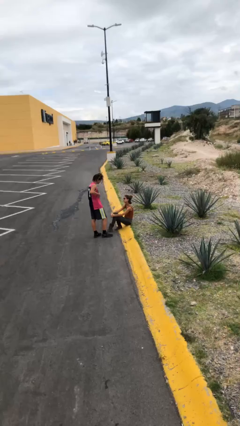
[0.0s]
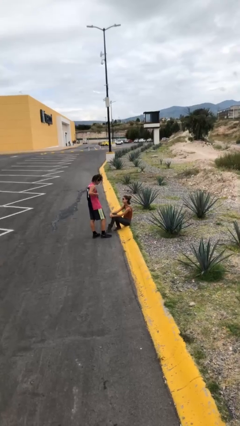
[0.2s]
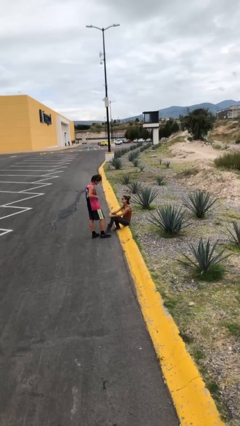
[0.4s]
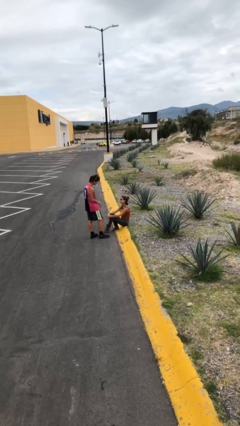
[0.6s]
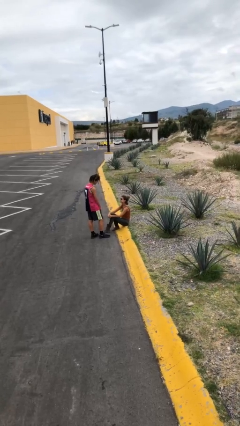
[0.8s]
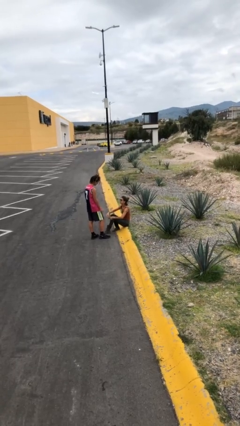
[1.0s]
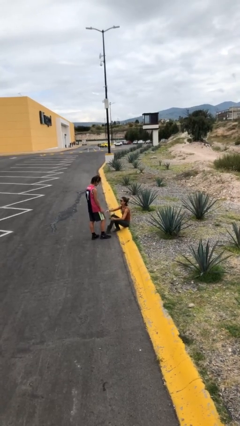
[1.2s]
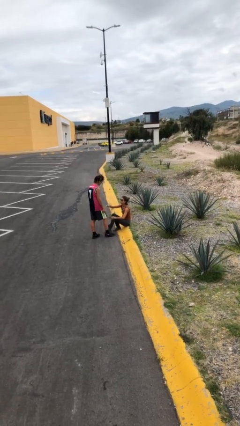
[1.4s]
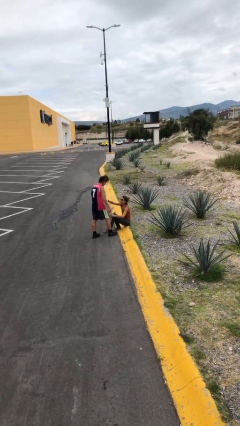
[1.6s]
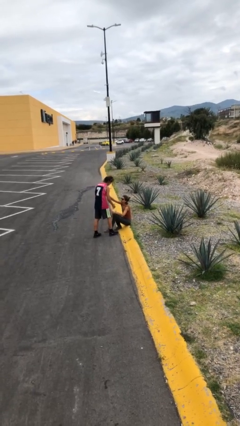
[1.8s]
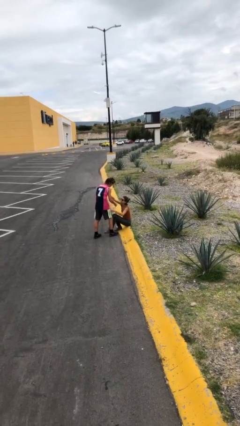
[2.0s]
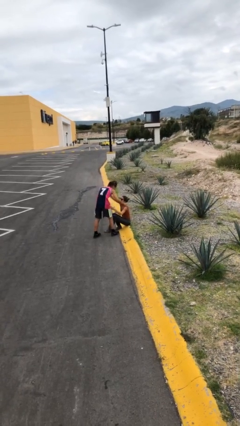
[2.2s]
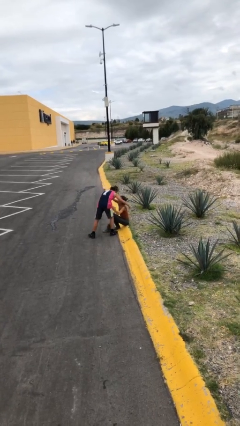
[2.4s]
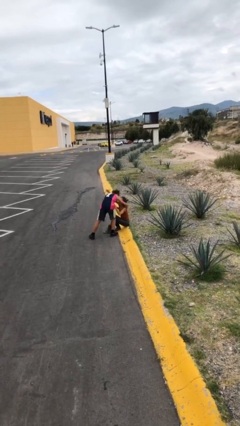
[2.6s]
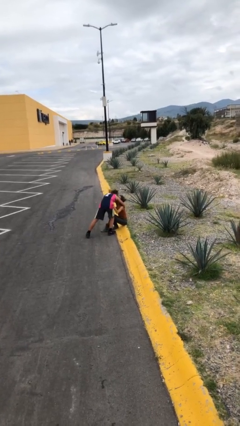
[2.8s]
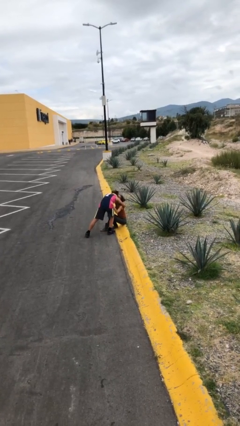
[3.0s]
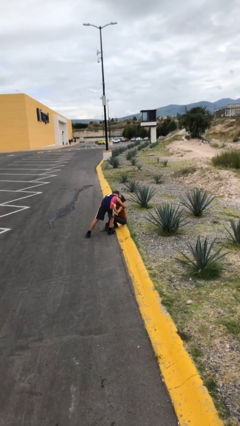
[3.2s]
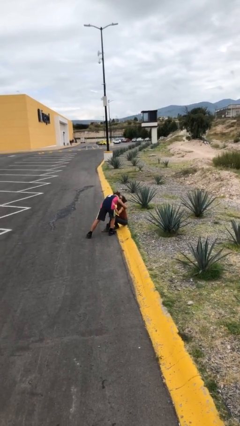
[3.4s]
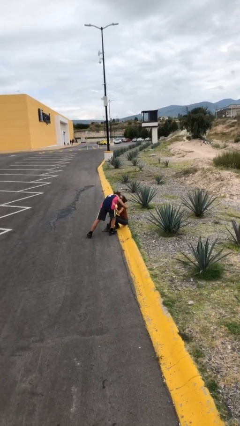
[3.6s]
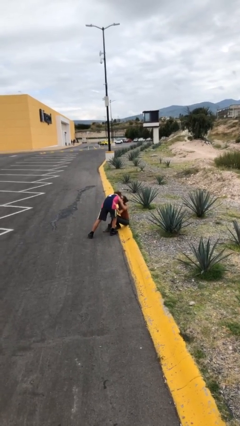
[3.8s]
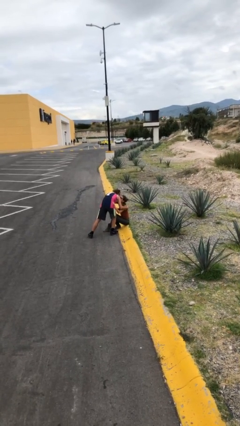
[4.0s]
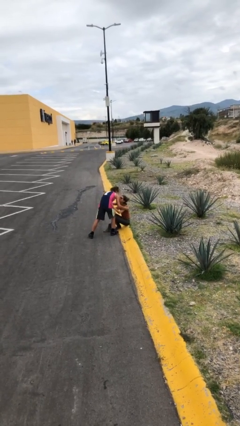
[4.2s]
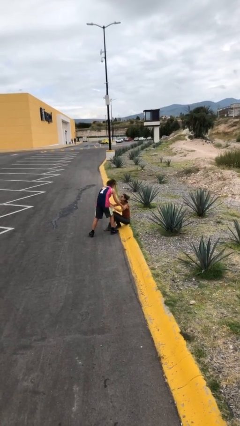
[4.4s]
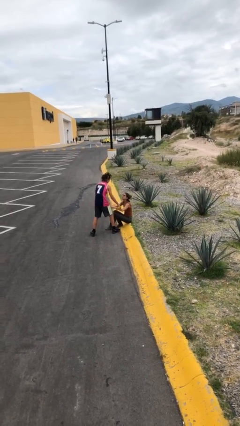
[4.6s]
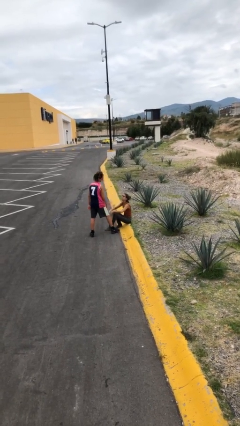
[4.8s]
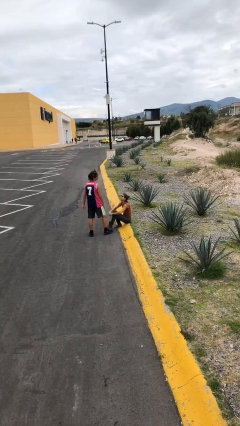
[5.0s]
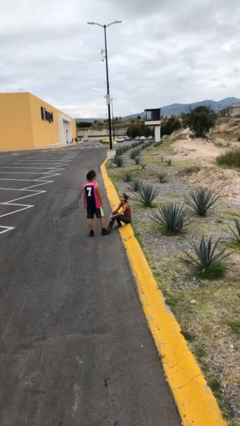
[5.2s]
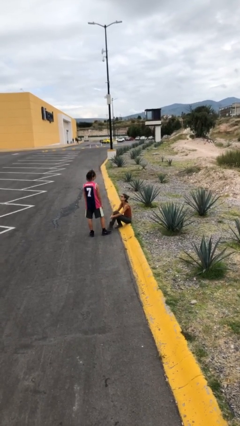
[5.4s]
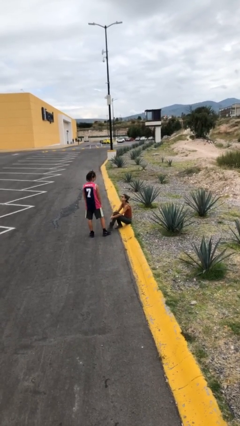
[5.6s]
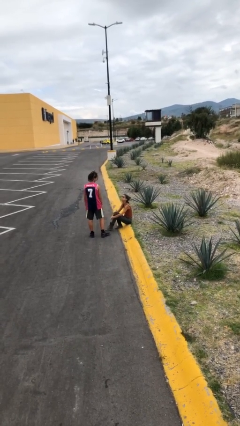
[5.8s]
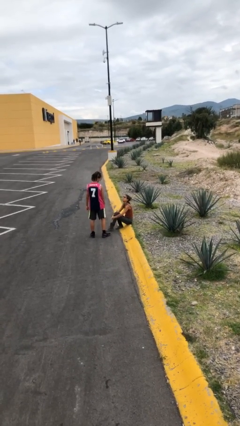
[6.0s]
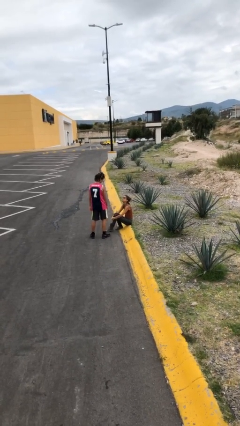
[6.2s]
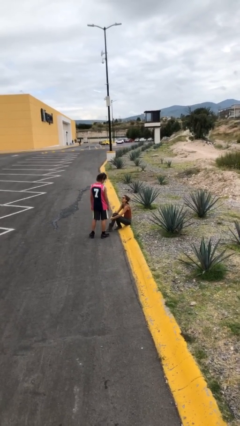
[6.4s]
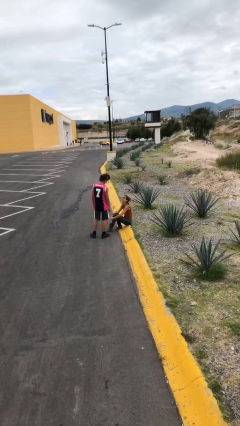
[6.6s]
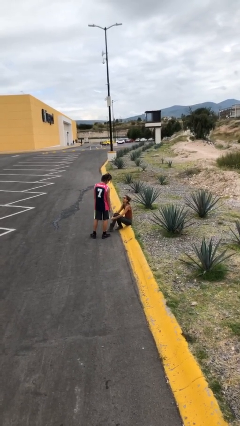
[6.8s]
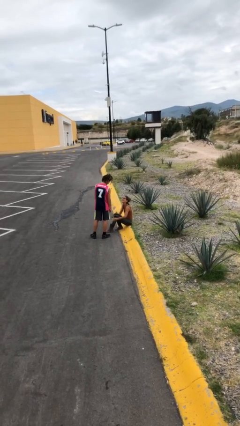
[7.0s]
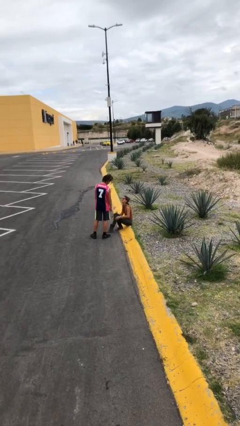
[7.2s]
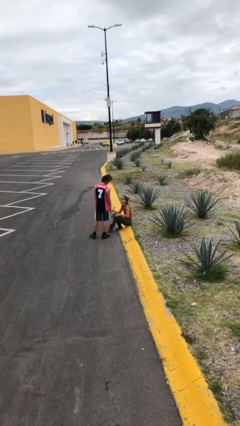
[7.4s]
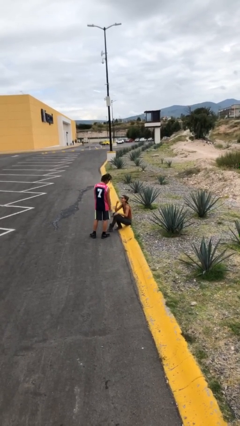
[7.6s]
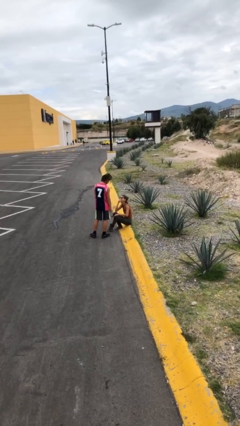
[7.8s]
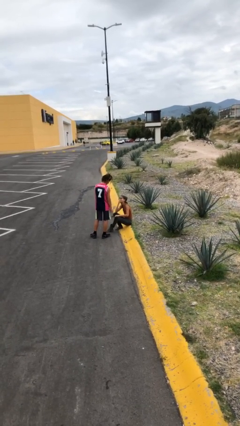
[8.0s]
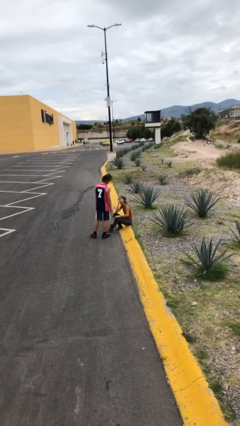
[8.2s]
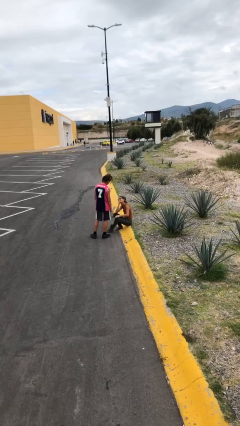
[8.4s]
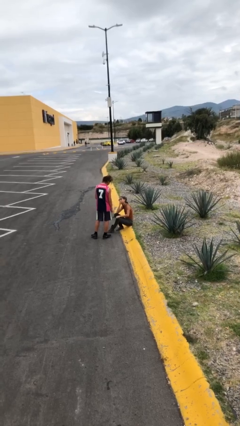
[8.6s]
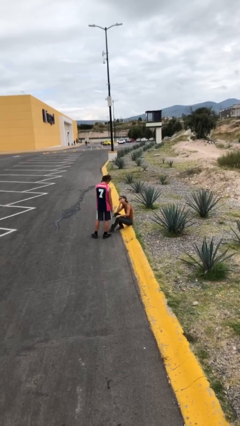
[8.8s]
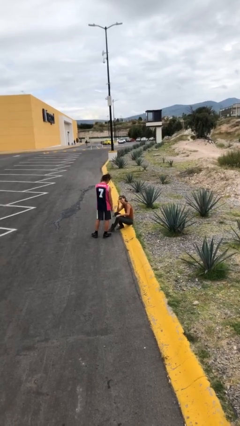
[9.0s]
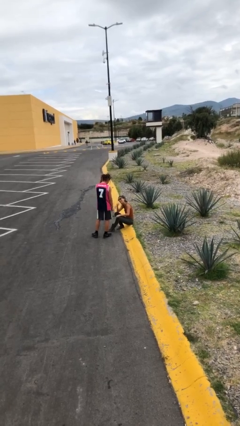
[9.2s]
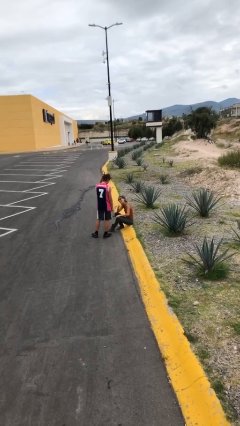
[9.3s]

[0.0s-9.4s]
person embraces person

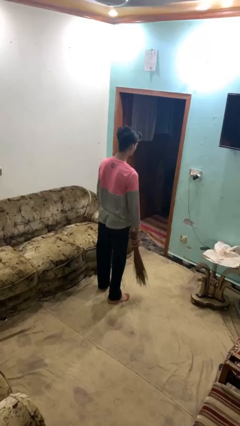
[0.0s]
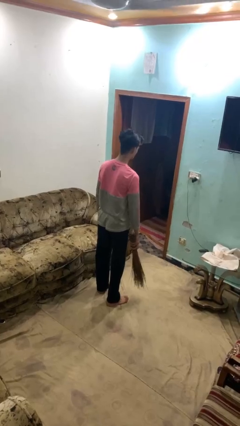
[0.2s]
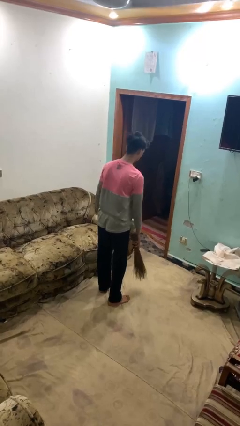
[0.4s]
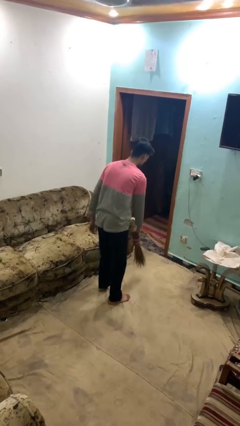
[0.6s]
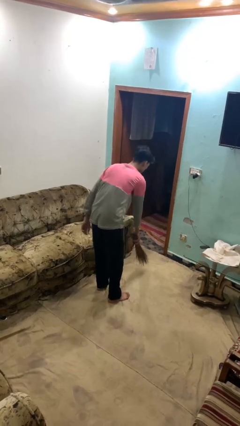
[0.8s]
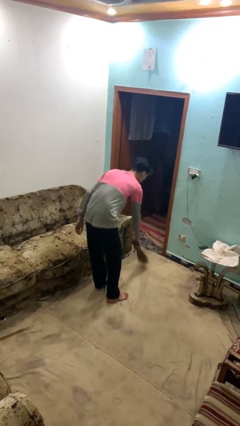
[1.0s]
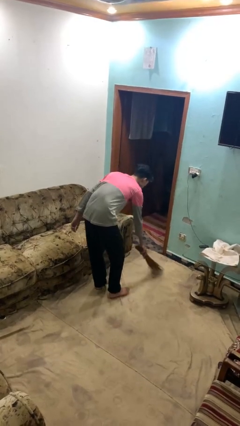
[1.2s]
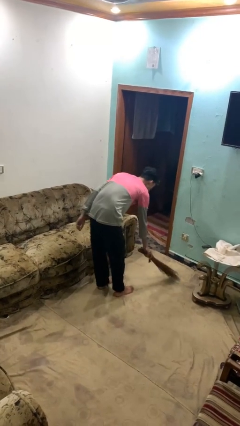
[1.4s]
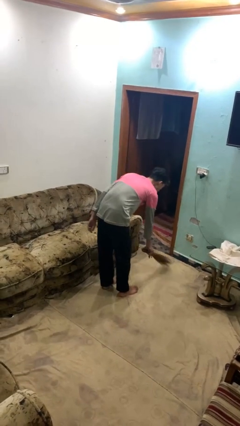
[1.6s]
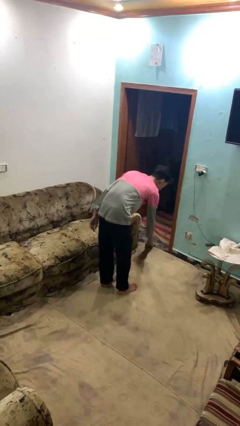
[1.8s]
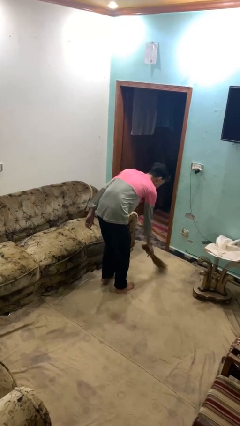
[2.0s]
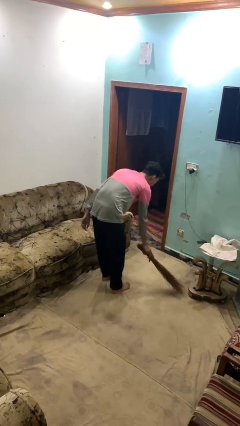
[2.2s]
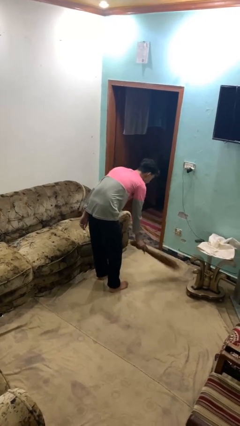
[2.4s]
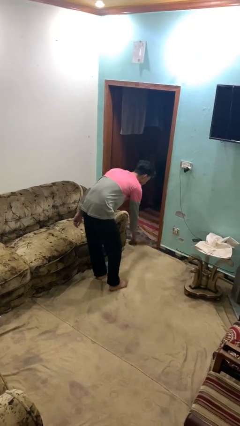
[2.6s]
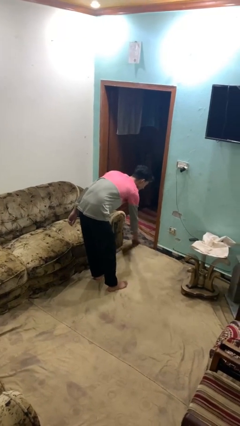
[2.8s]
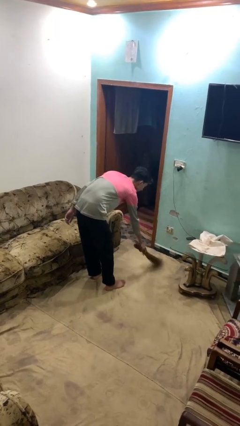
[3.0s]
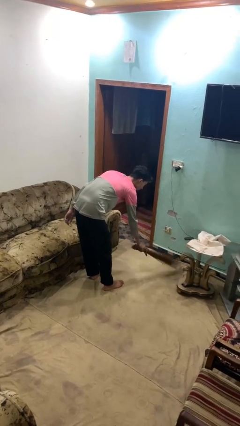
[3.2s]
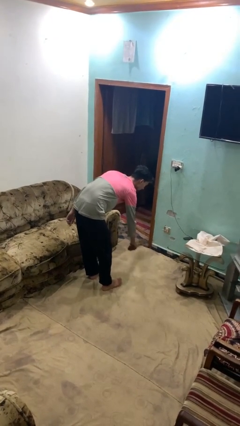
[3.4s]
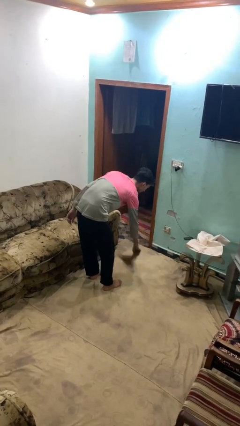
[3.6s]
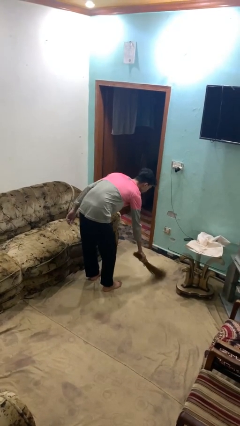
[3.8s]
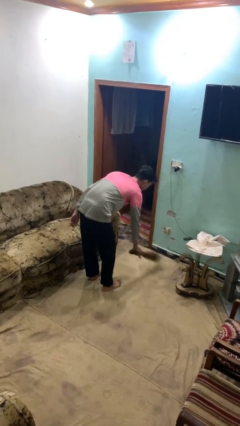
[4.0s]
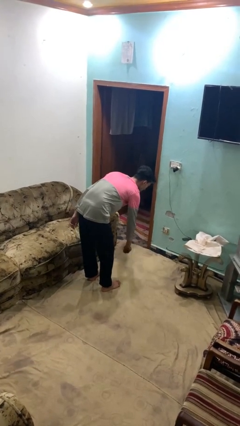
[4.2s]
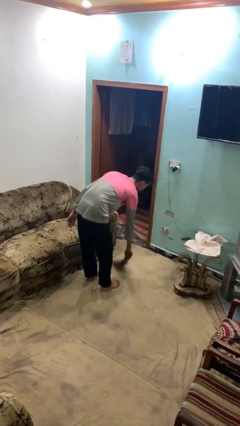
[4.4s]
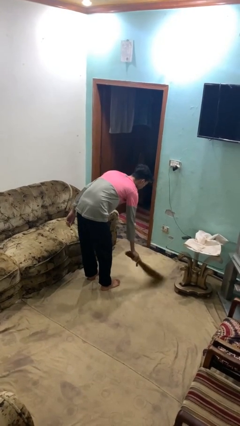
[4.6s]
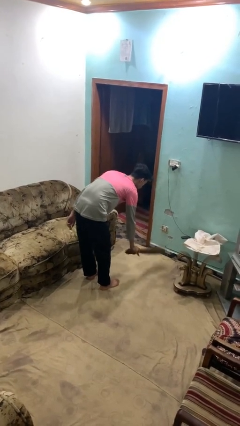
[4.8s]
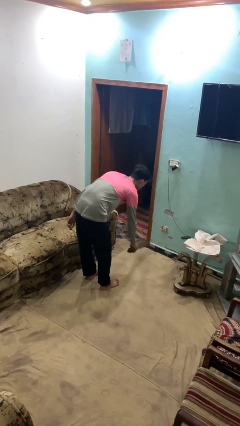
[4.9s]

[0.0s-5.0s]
person sweeps floor

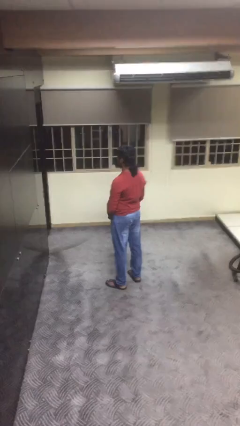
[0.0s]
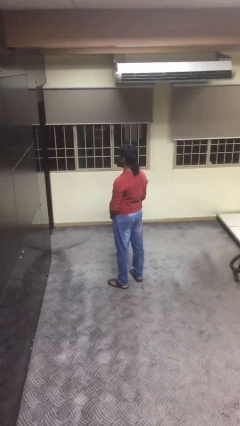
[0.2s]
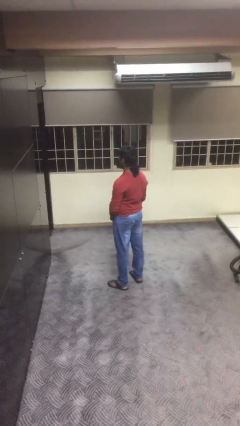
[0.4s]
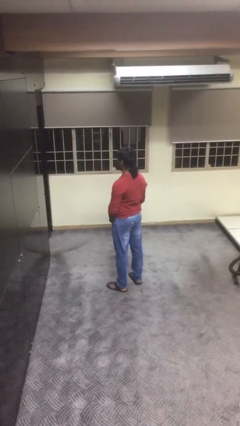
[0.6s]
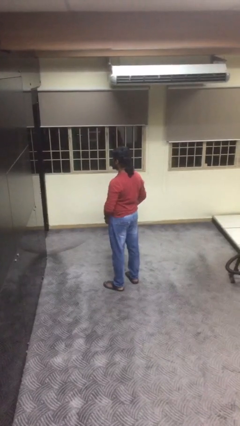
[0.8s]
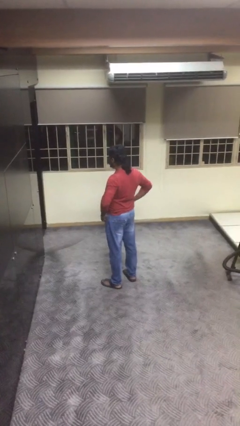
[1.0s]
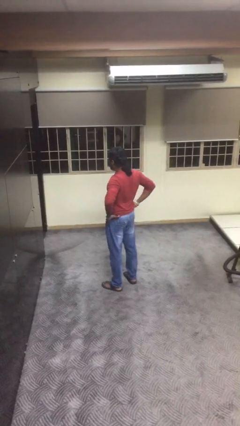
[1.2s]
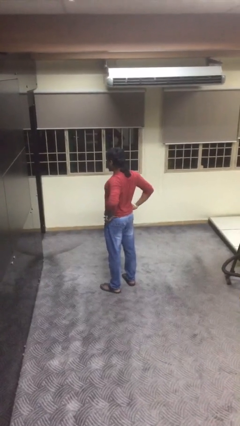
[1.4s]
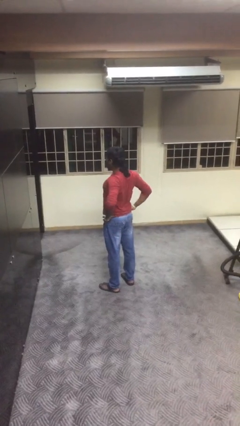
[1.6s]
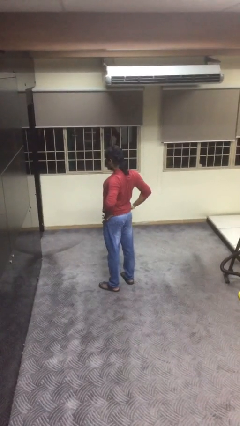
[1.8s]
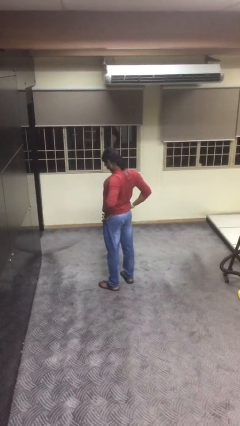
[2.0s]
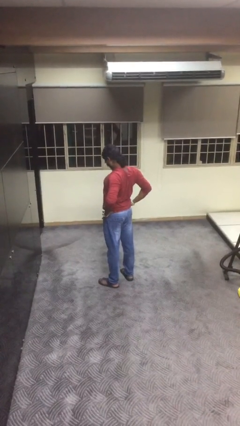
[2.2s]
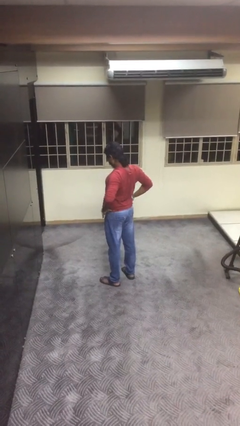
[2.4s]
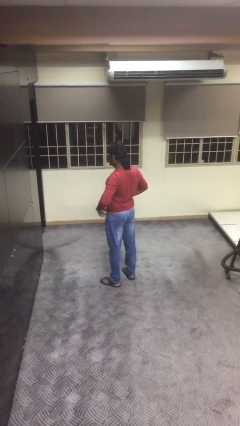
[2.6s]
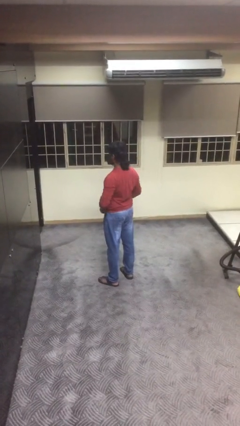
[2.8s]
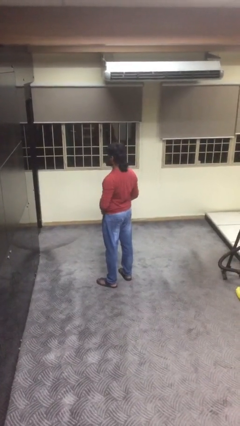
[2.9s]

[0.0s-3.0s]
person stretches back

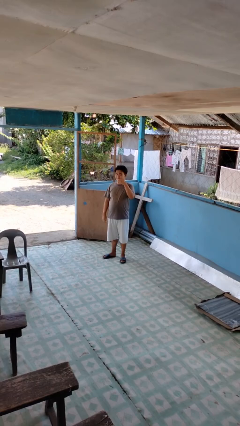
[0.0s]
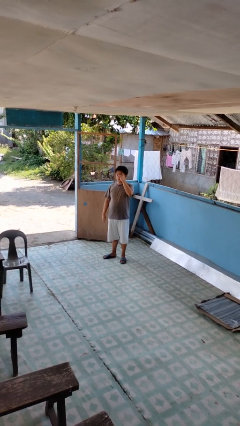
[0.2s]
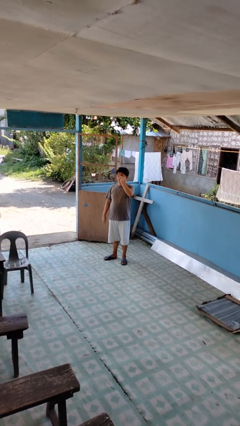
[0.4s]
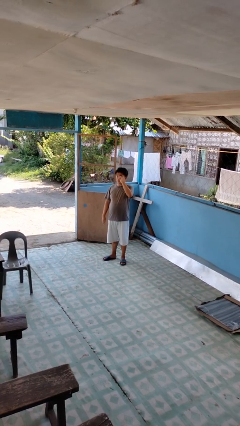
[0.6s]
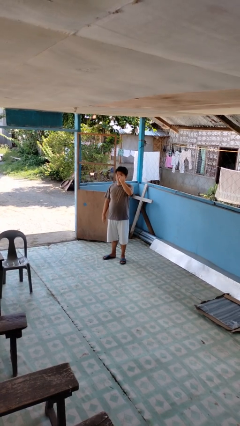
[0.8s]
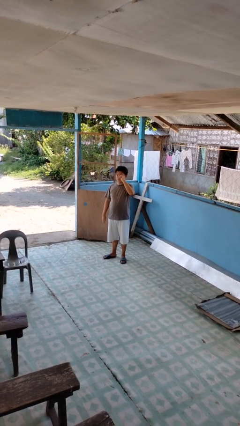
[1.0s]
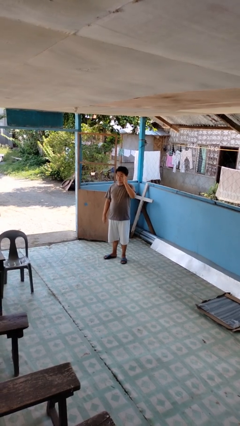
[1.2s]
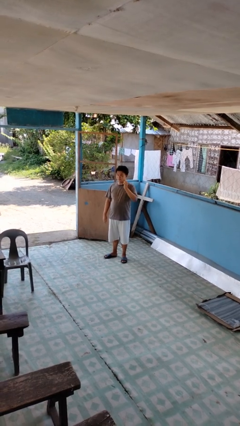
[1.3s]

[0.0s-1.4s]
person rubs eyes
